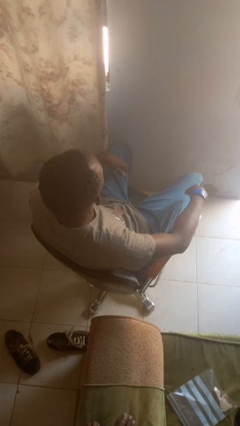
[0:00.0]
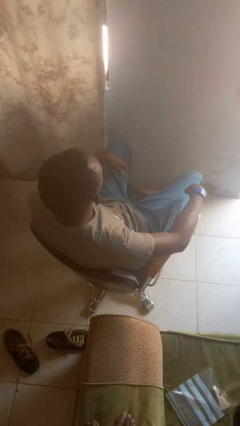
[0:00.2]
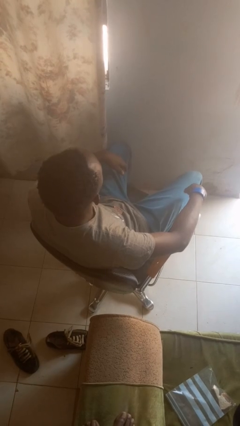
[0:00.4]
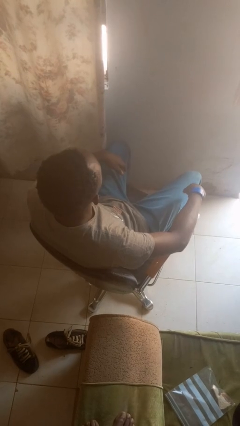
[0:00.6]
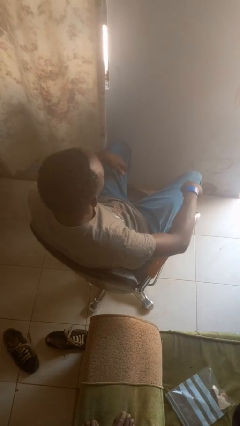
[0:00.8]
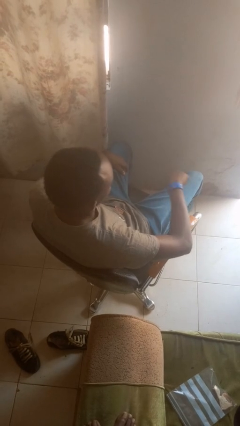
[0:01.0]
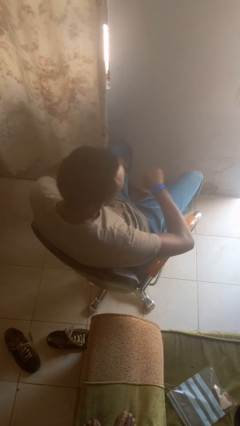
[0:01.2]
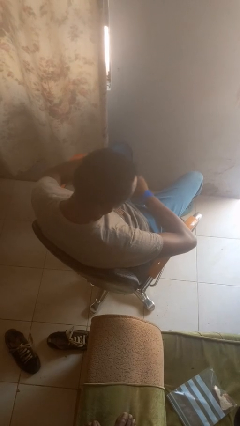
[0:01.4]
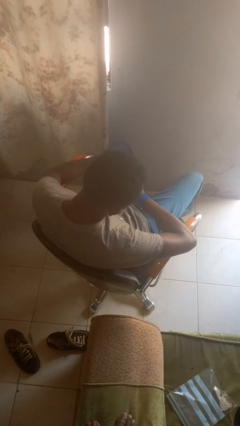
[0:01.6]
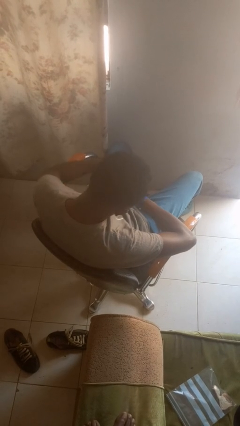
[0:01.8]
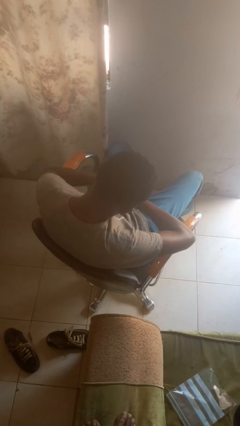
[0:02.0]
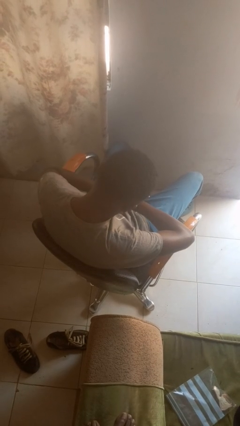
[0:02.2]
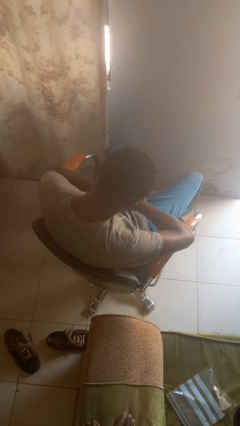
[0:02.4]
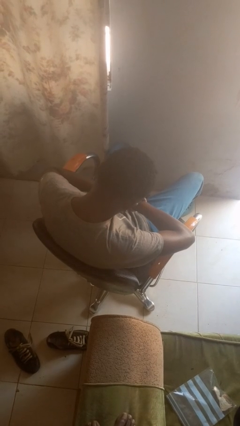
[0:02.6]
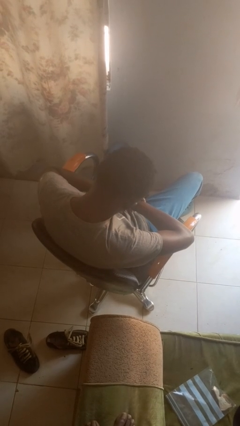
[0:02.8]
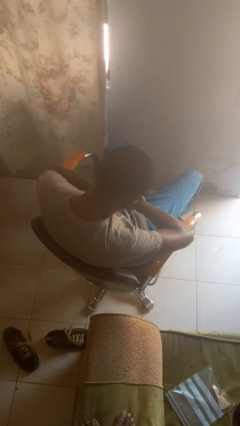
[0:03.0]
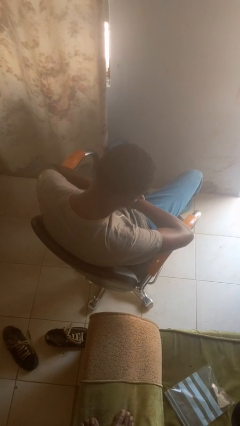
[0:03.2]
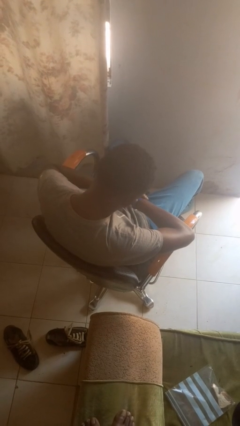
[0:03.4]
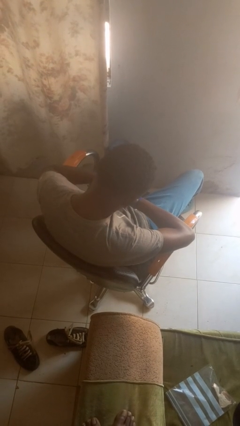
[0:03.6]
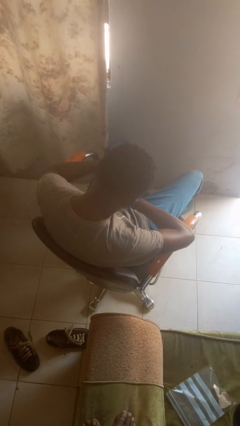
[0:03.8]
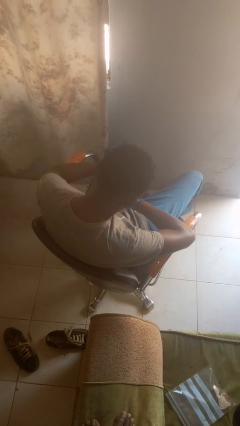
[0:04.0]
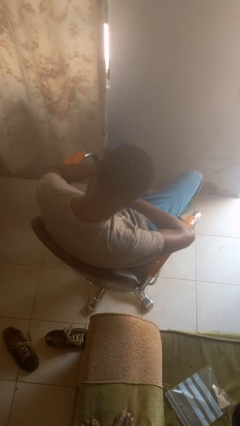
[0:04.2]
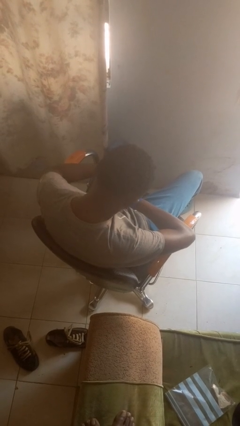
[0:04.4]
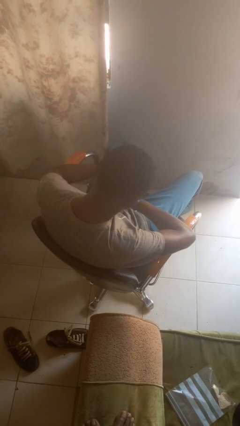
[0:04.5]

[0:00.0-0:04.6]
person looks at wristwatch

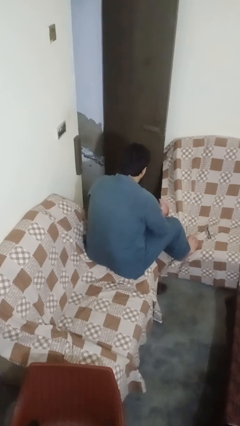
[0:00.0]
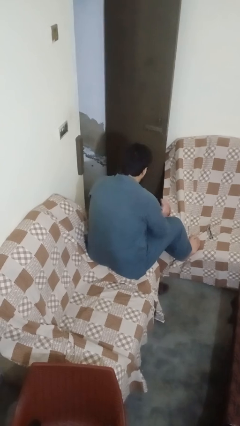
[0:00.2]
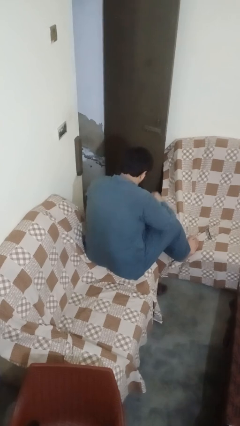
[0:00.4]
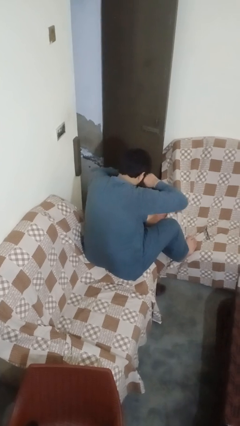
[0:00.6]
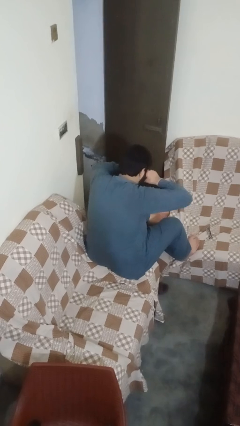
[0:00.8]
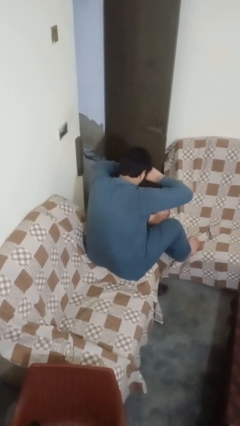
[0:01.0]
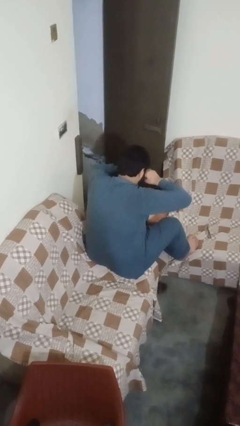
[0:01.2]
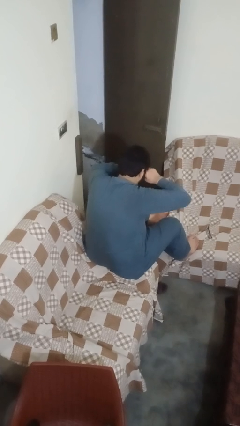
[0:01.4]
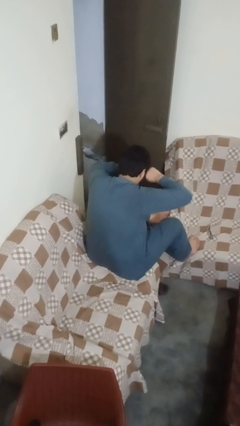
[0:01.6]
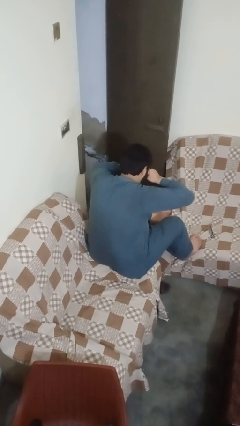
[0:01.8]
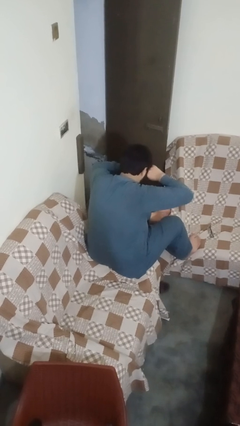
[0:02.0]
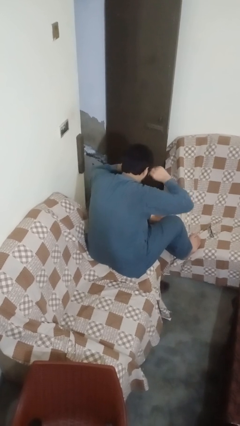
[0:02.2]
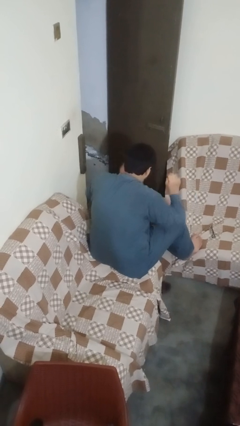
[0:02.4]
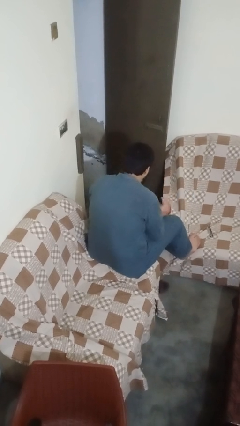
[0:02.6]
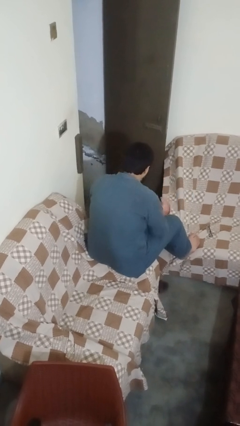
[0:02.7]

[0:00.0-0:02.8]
person rubs eyes

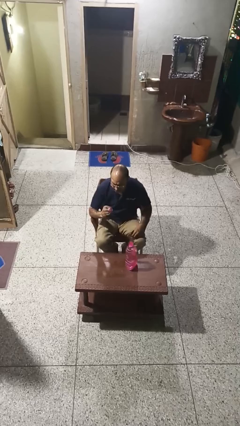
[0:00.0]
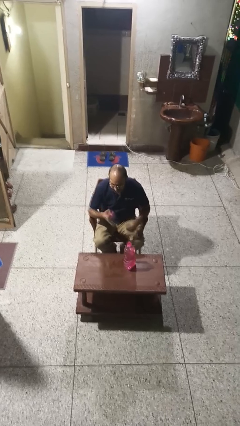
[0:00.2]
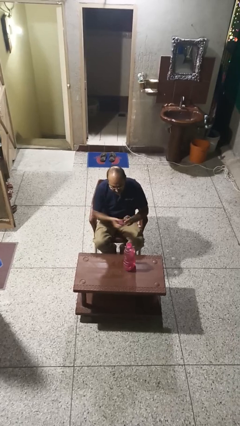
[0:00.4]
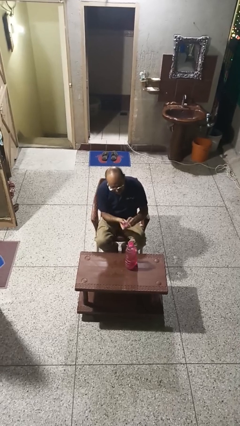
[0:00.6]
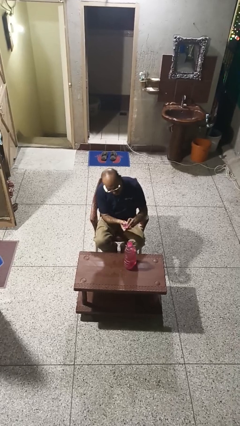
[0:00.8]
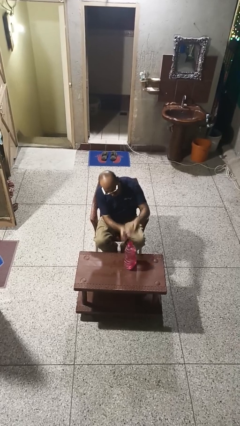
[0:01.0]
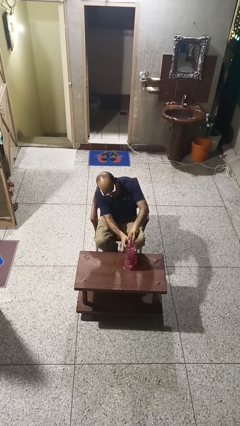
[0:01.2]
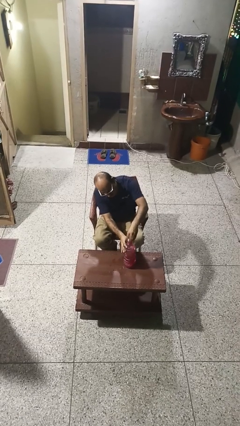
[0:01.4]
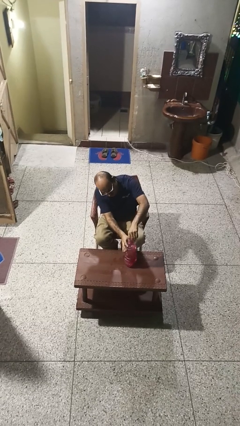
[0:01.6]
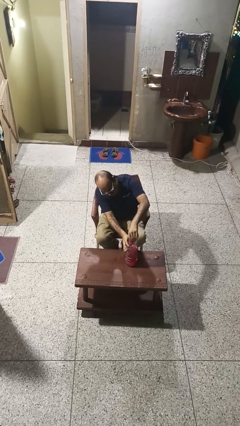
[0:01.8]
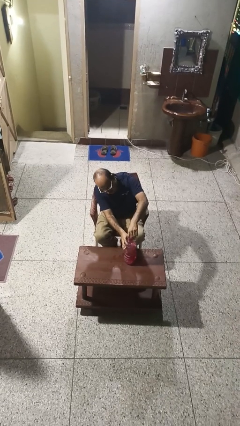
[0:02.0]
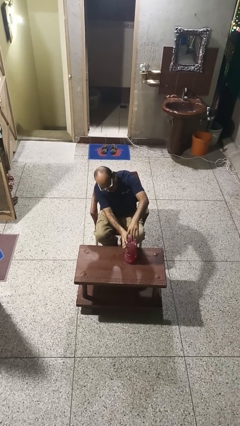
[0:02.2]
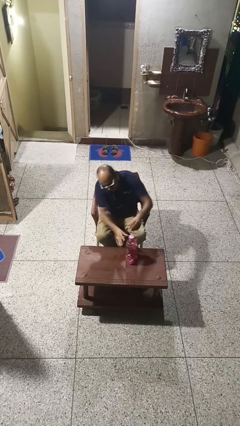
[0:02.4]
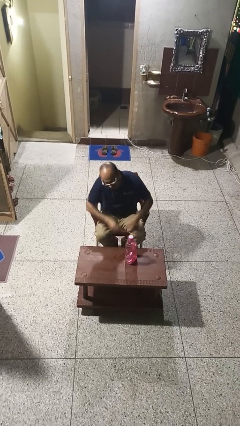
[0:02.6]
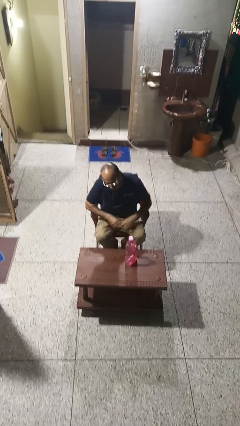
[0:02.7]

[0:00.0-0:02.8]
person screws lid to bottle

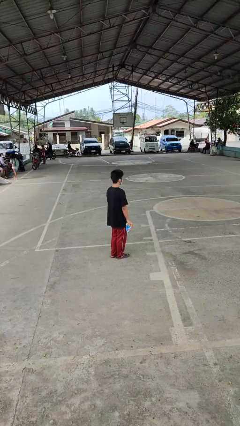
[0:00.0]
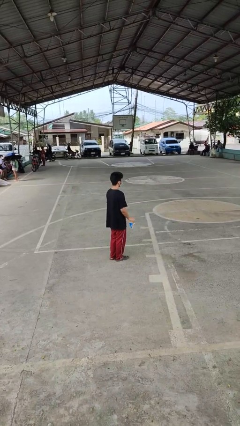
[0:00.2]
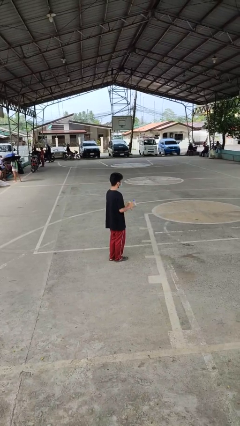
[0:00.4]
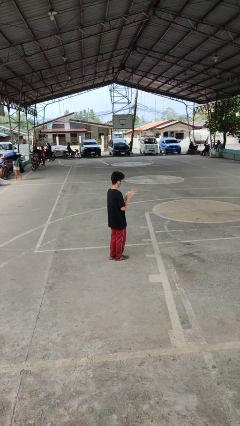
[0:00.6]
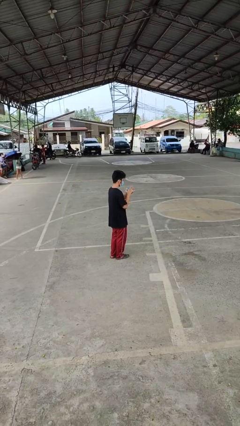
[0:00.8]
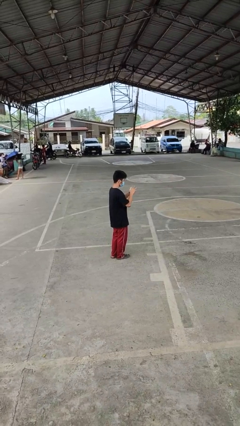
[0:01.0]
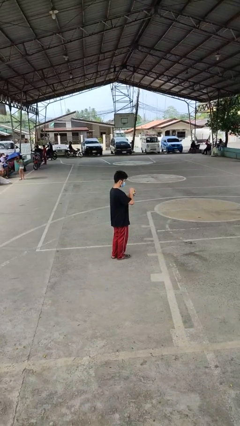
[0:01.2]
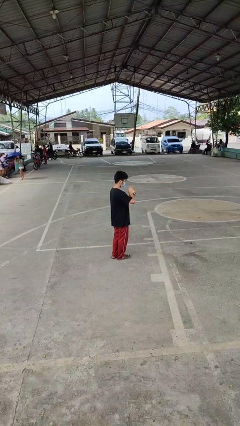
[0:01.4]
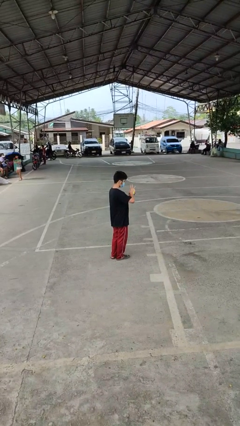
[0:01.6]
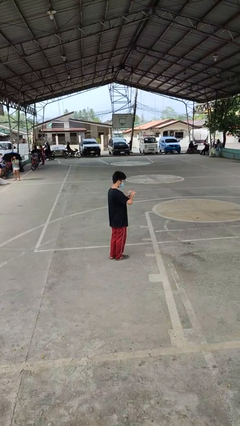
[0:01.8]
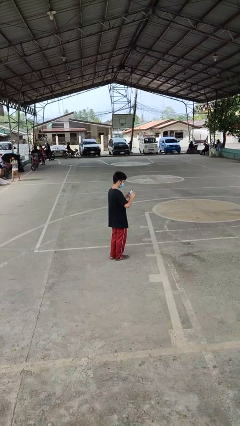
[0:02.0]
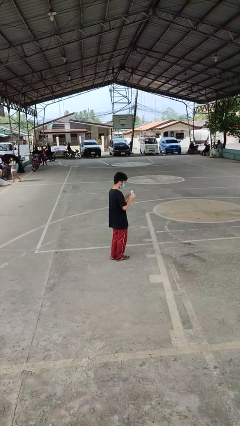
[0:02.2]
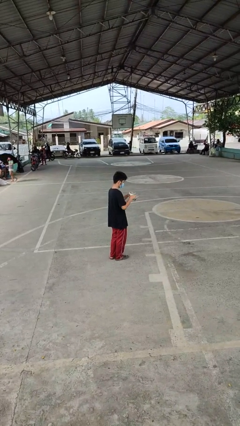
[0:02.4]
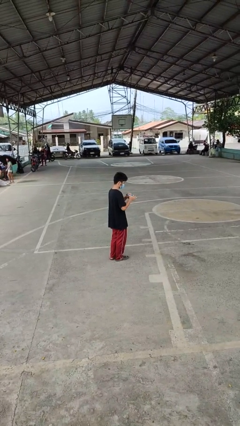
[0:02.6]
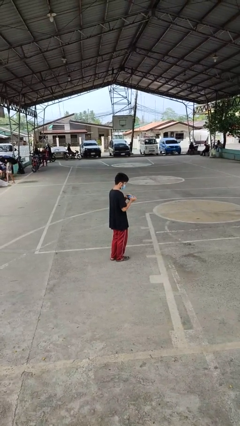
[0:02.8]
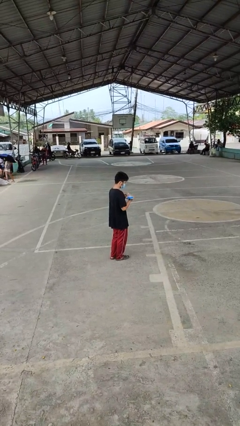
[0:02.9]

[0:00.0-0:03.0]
person squeezes object

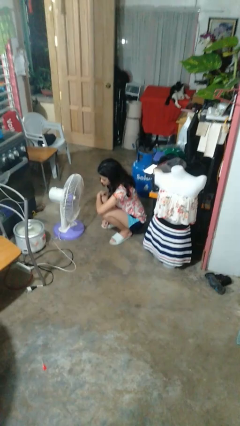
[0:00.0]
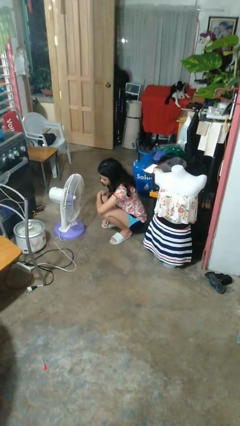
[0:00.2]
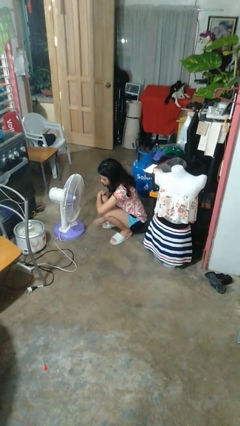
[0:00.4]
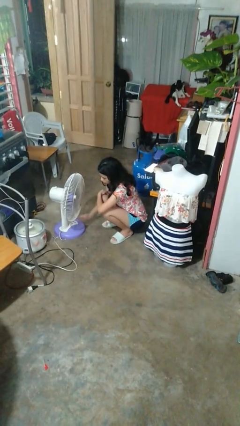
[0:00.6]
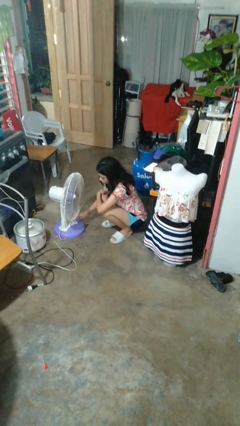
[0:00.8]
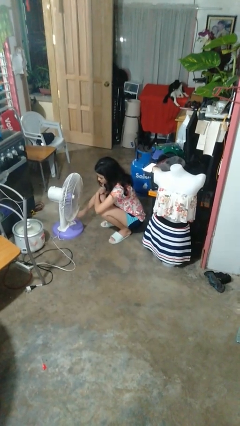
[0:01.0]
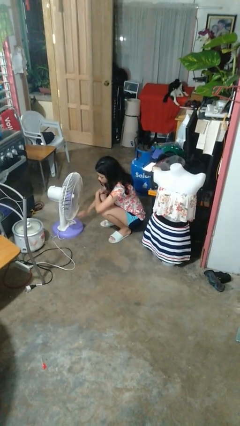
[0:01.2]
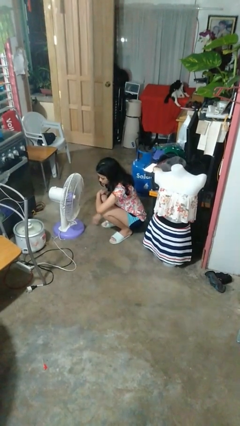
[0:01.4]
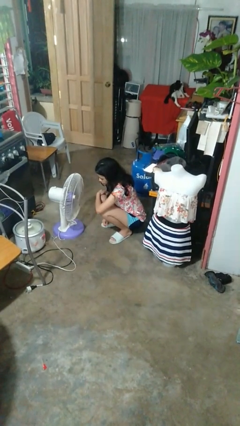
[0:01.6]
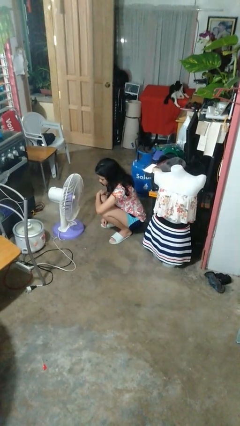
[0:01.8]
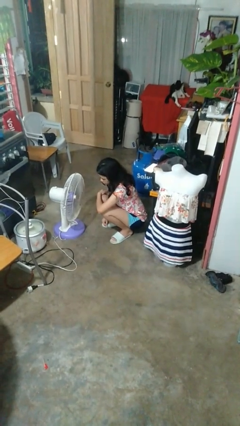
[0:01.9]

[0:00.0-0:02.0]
person turns on fan

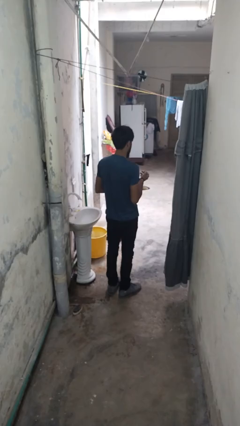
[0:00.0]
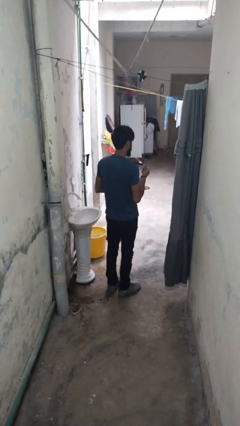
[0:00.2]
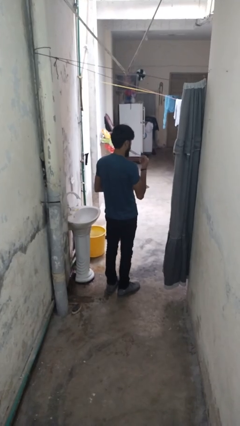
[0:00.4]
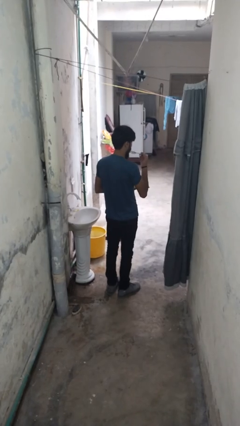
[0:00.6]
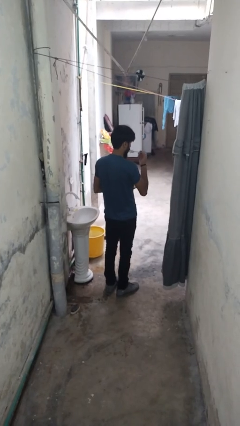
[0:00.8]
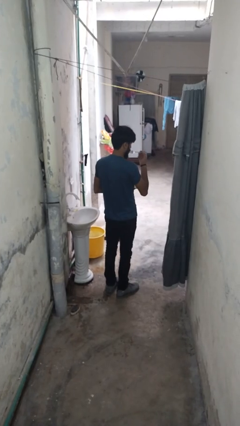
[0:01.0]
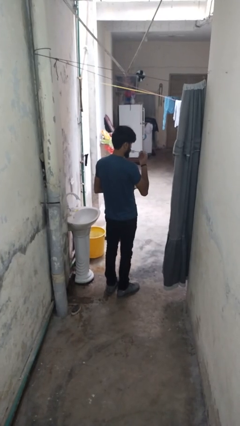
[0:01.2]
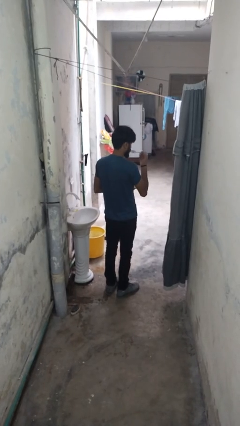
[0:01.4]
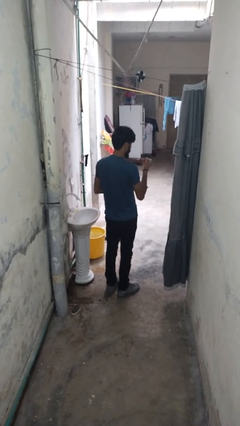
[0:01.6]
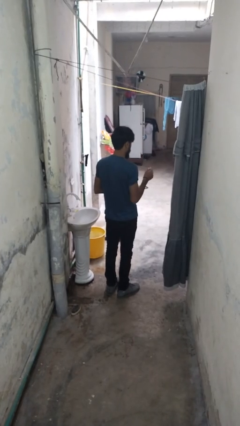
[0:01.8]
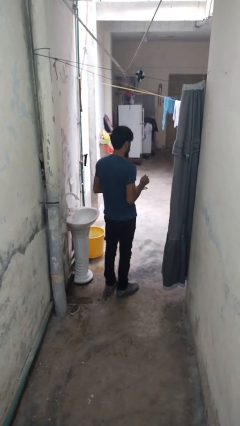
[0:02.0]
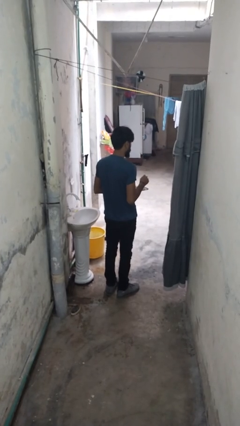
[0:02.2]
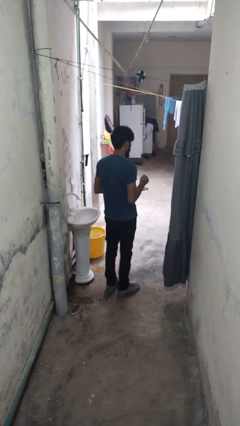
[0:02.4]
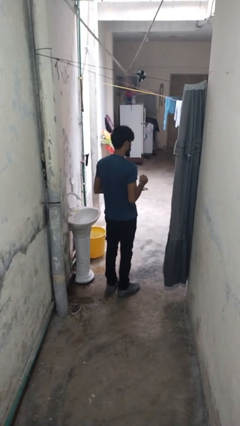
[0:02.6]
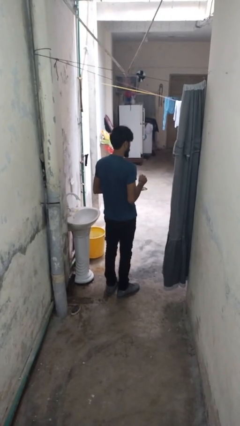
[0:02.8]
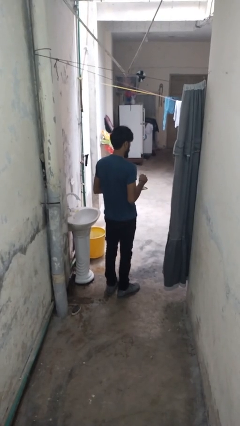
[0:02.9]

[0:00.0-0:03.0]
person eats with utensil
